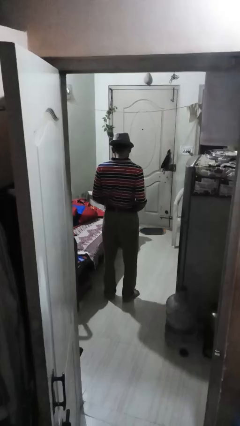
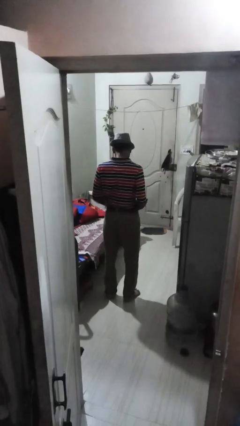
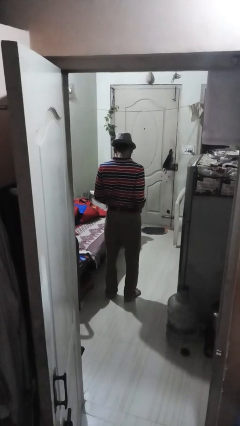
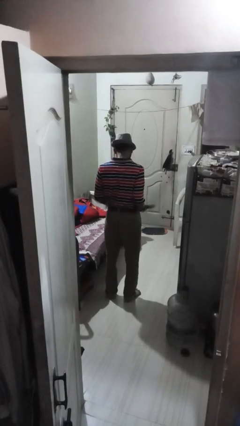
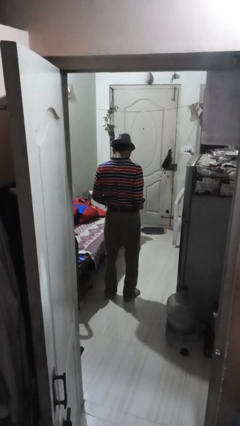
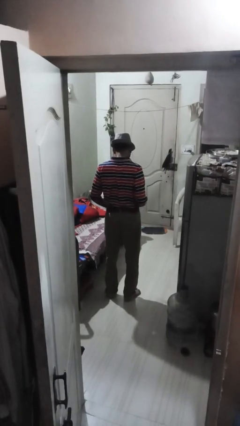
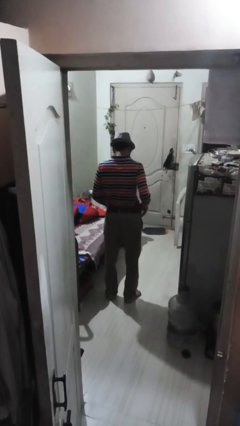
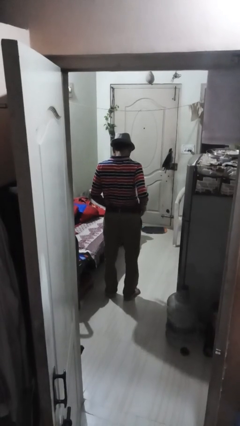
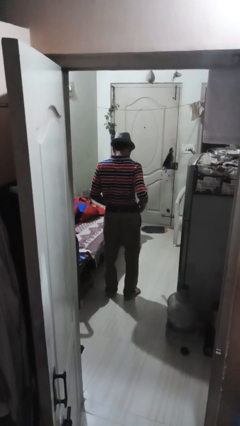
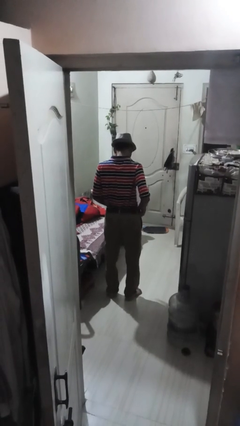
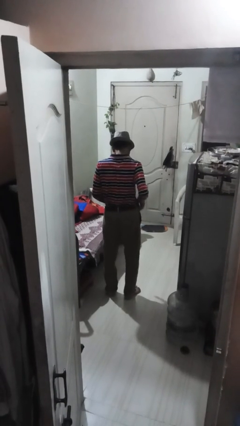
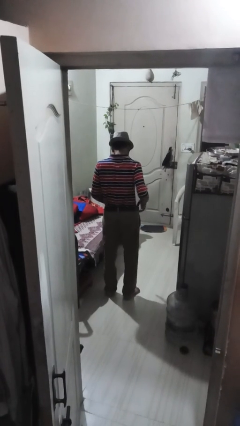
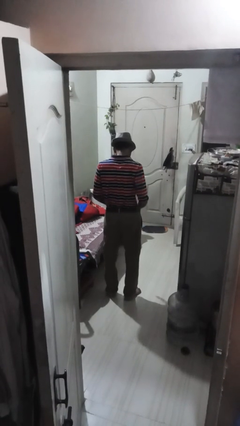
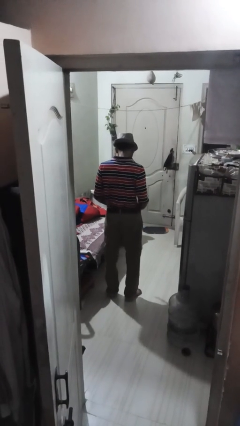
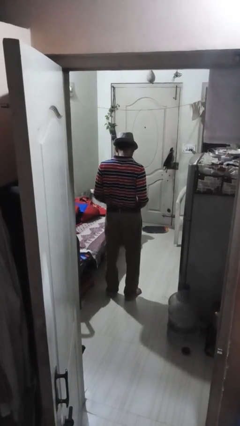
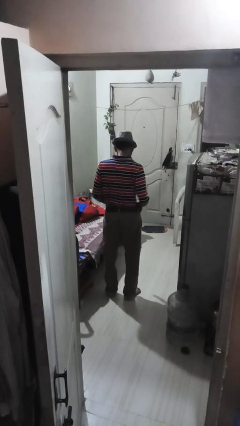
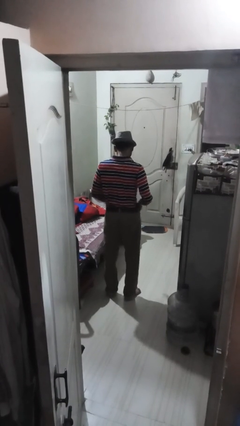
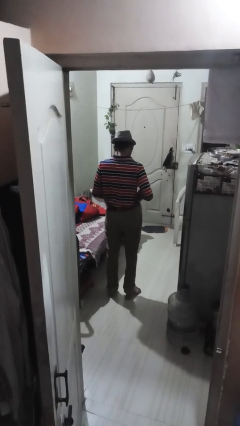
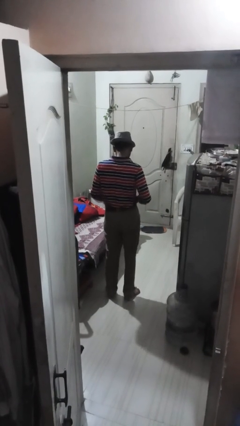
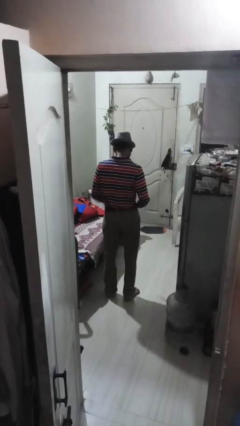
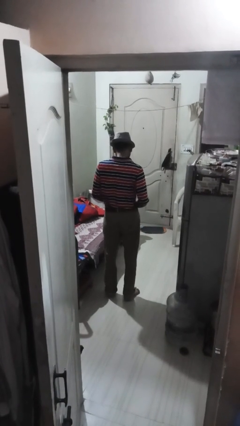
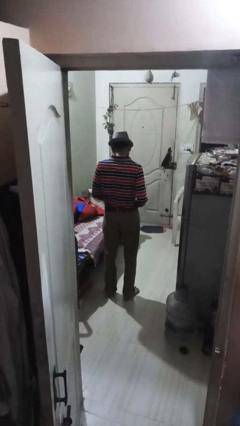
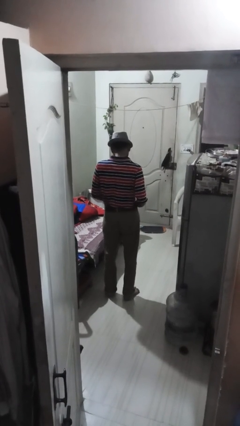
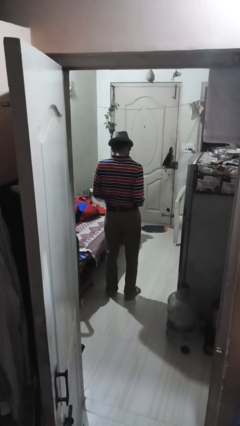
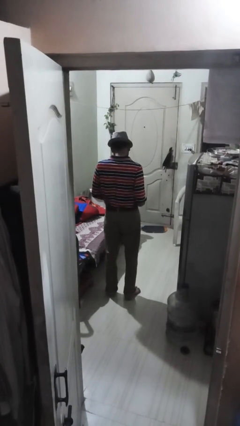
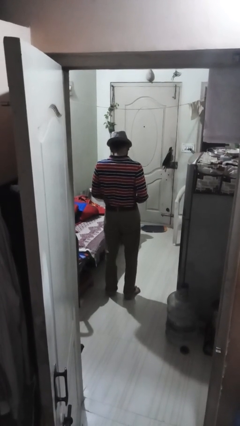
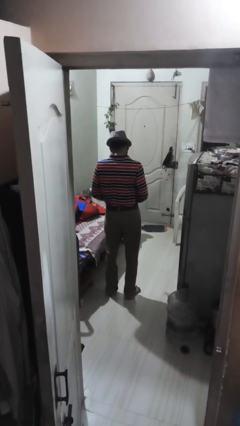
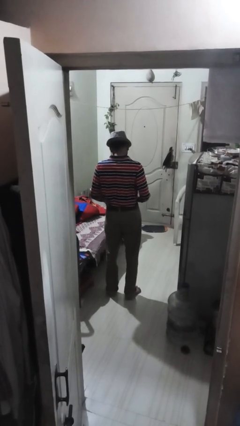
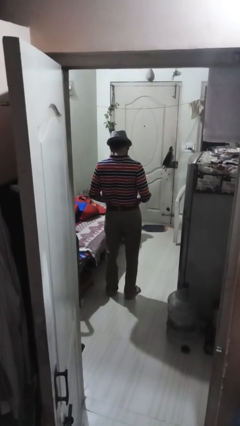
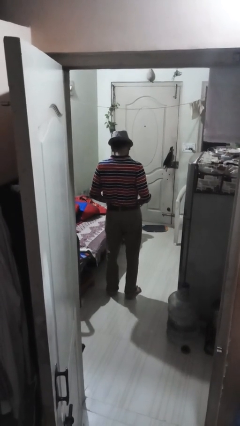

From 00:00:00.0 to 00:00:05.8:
person hikes up pants

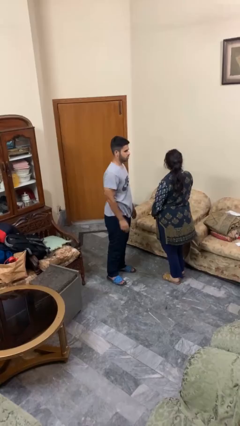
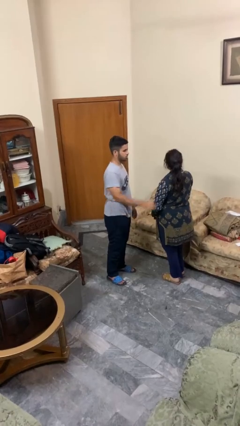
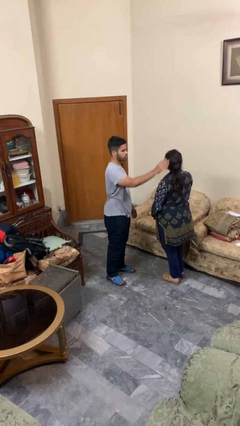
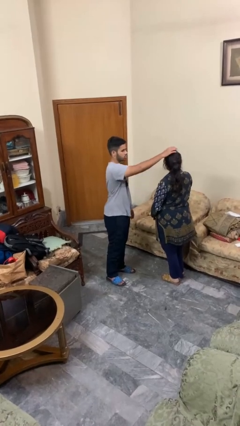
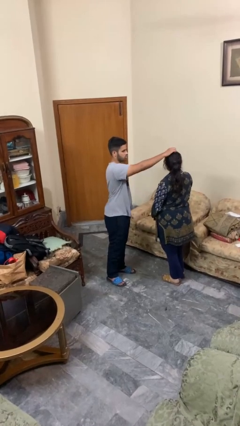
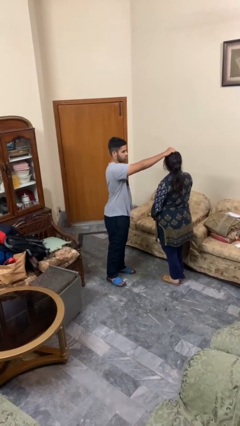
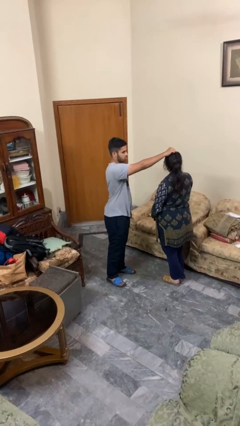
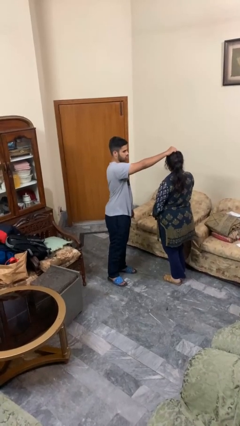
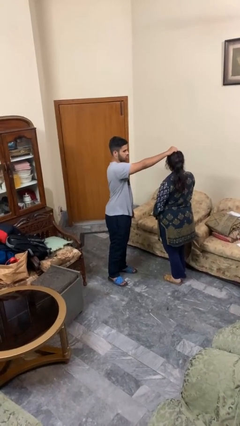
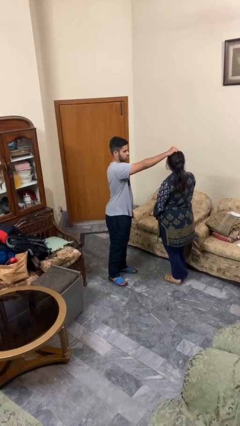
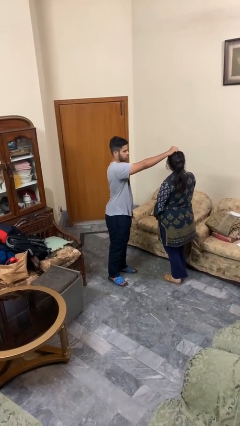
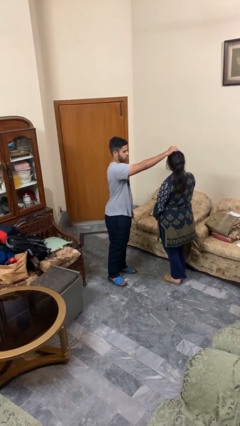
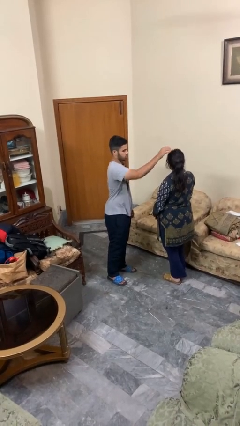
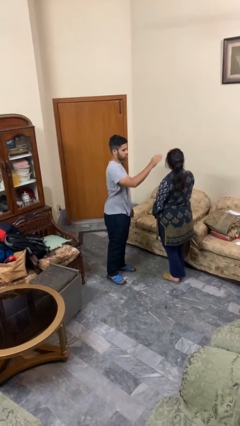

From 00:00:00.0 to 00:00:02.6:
person grabs person by hair

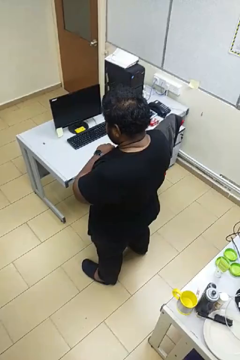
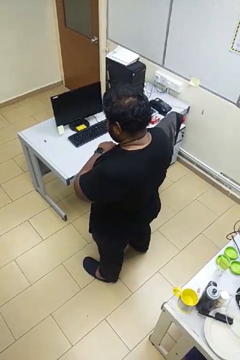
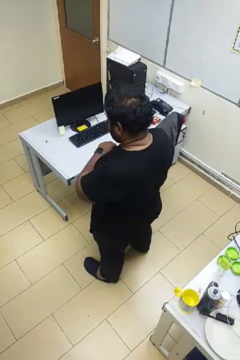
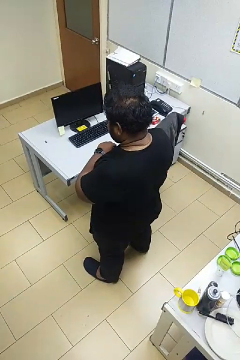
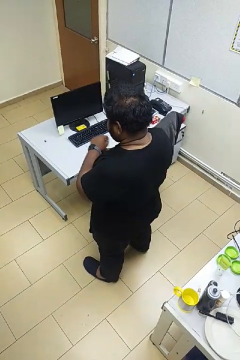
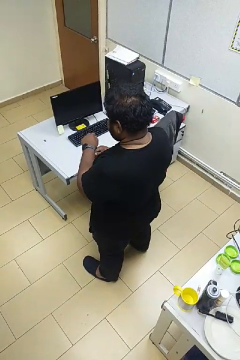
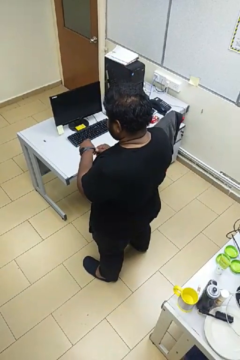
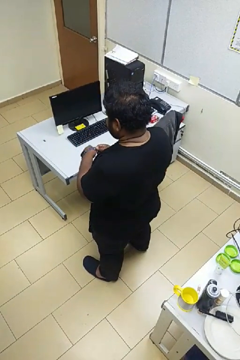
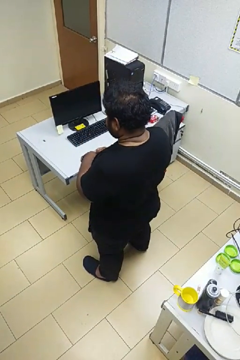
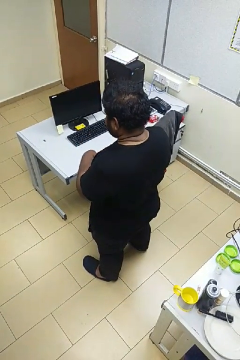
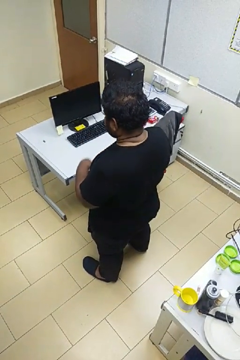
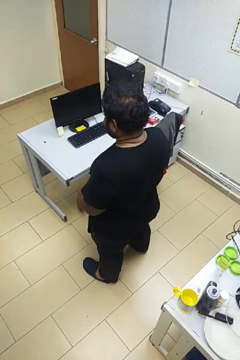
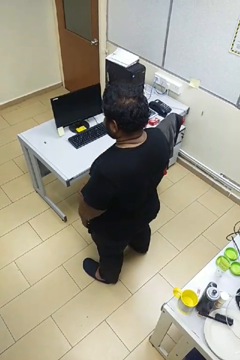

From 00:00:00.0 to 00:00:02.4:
person takes off wristwatch

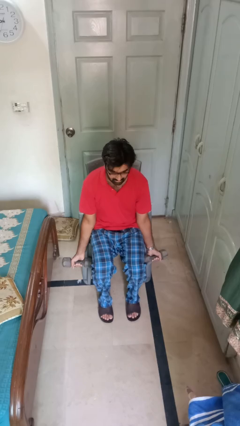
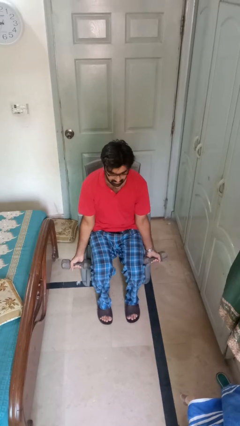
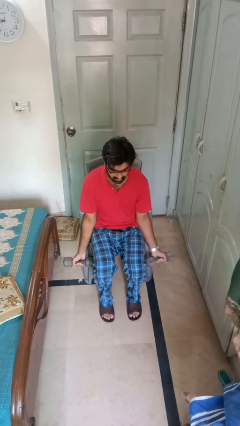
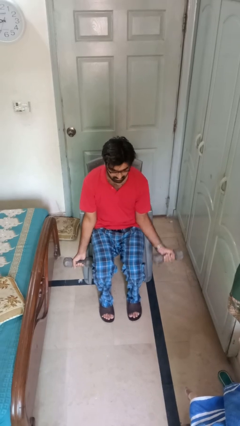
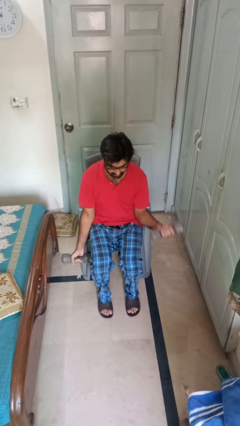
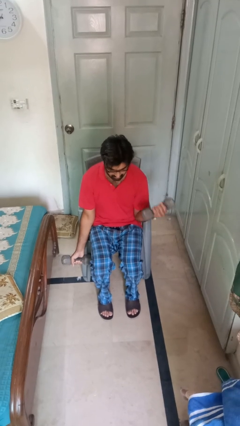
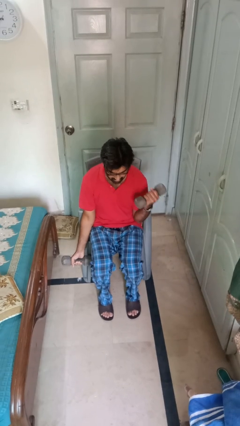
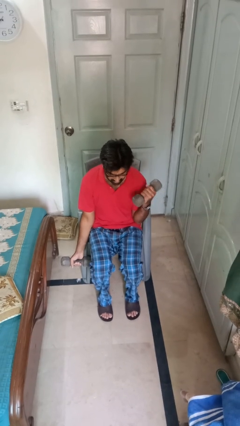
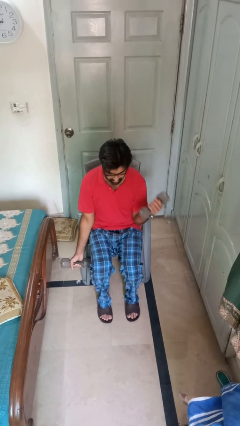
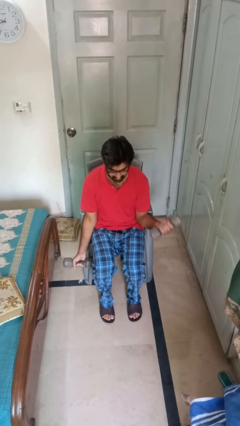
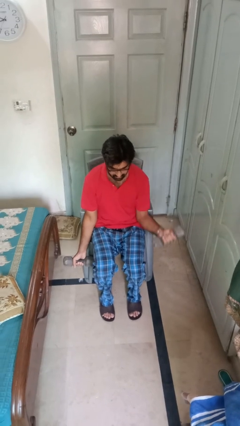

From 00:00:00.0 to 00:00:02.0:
person lifts dumbbells

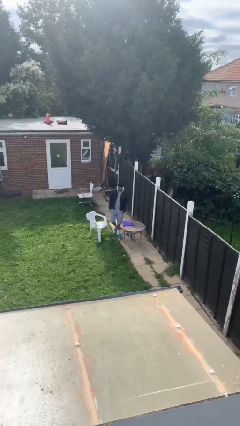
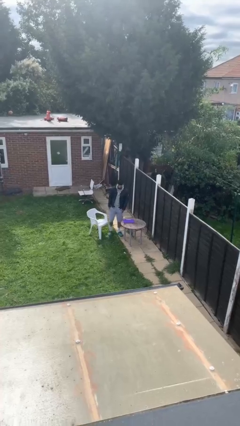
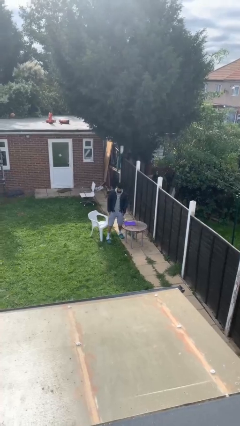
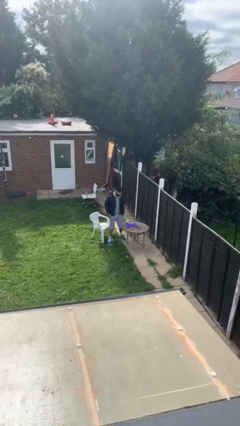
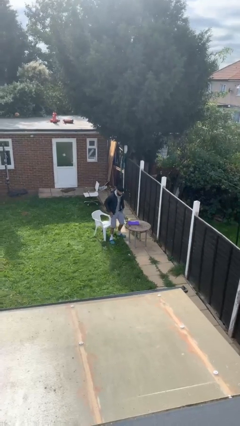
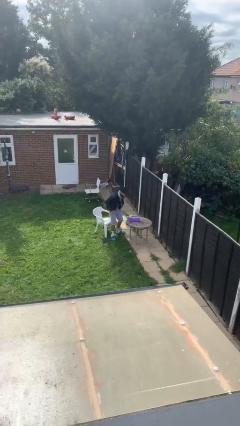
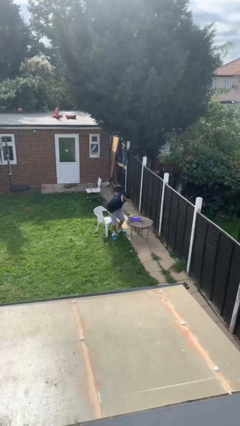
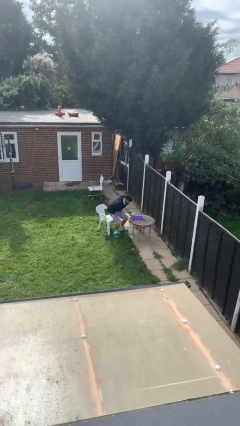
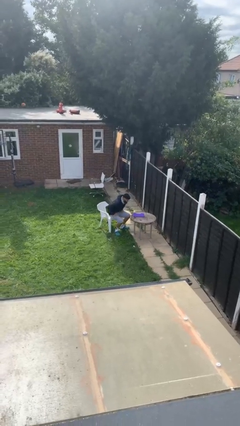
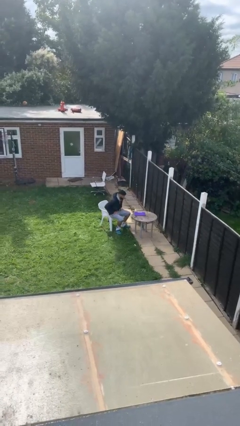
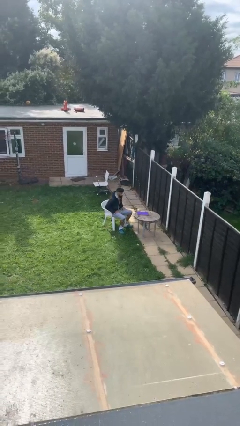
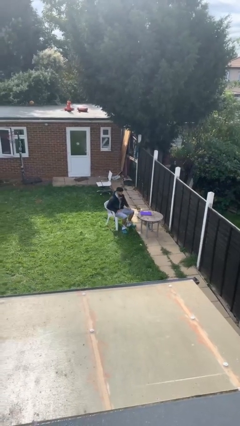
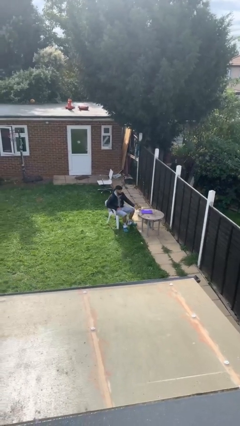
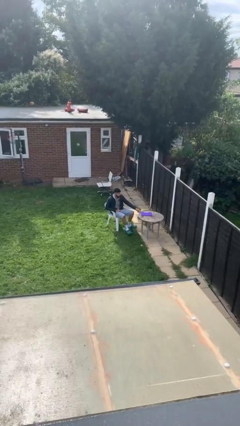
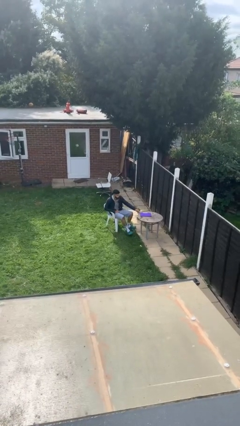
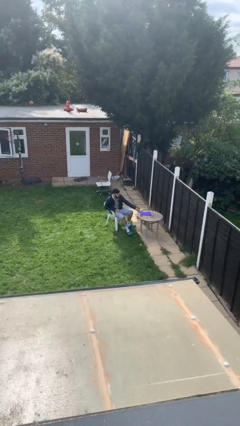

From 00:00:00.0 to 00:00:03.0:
person sits down

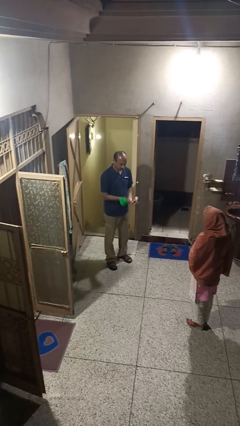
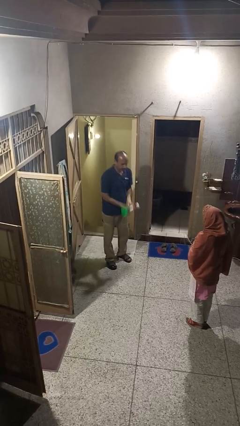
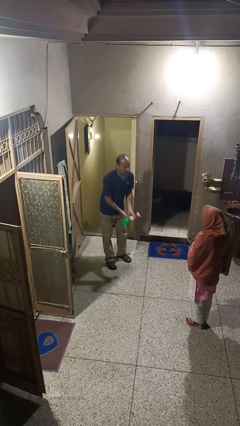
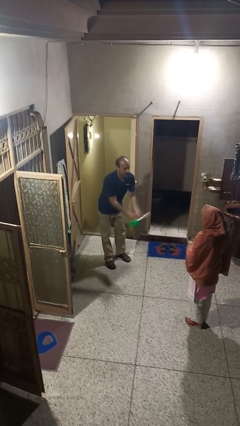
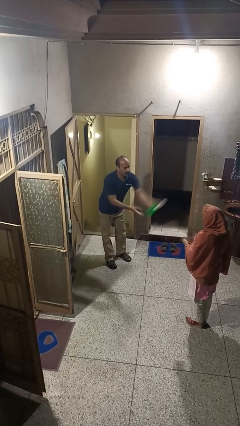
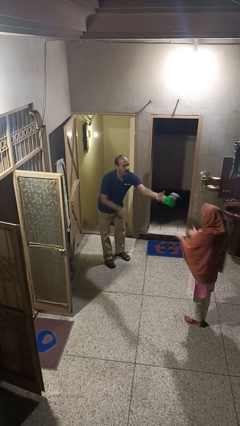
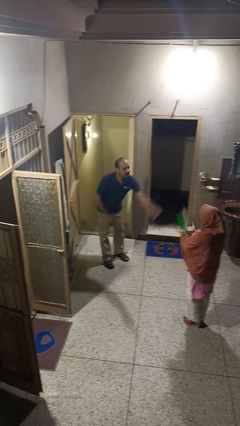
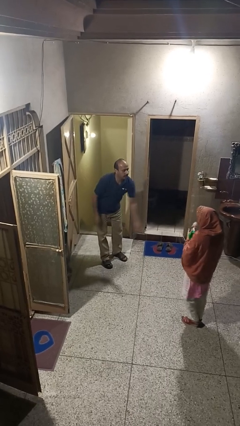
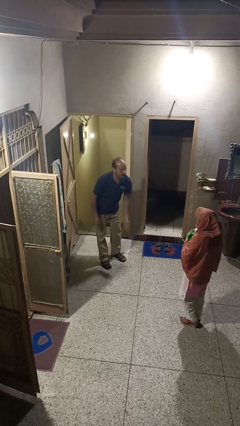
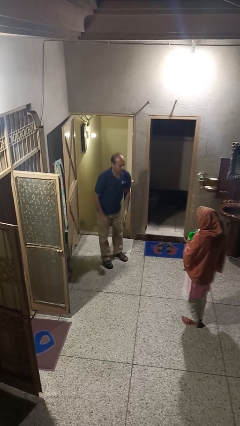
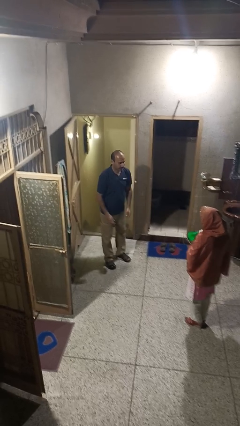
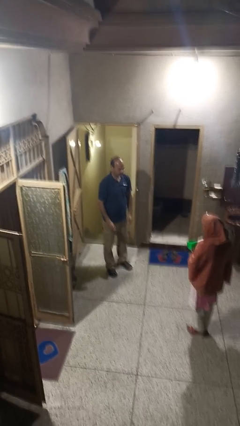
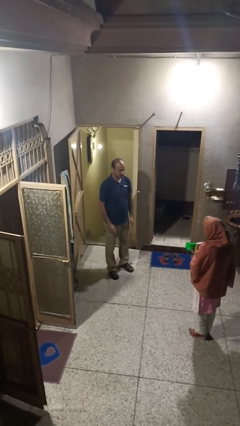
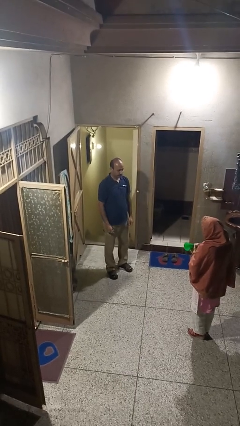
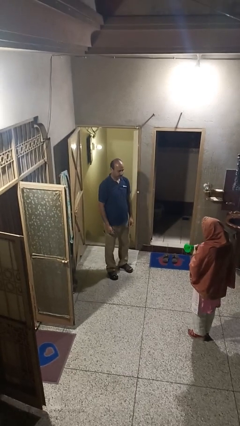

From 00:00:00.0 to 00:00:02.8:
person throws object to person
